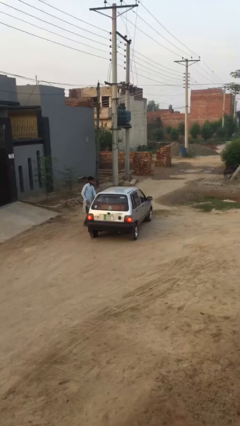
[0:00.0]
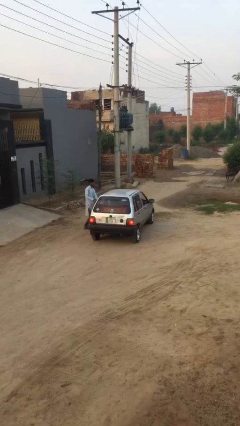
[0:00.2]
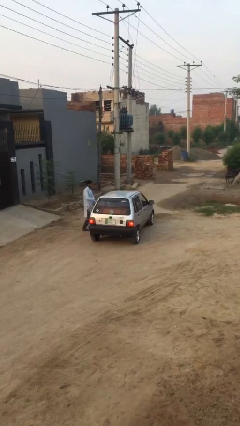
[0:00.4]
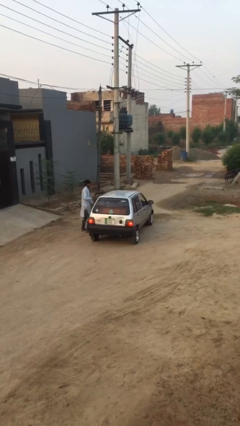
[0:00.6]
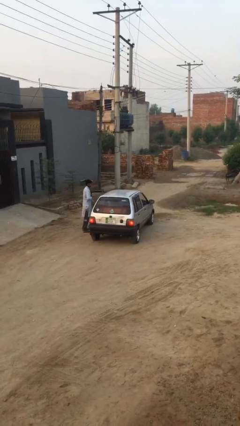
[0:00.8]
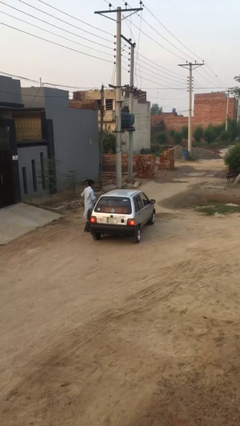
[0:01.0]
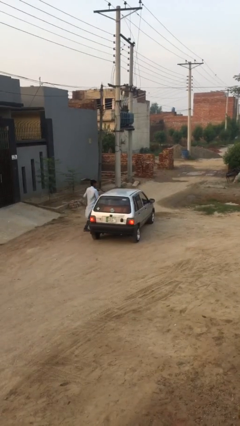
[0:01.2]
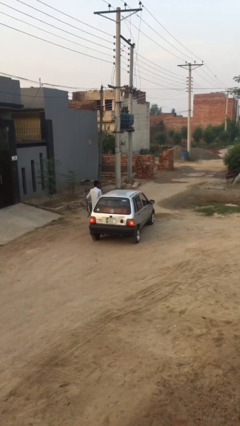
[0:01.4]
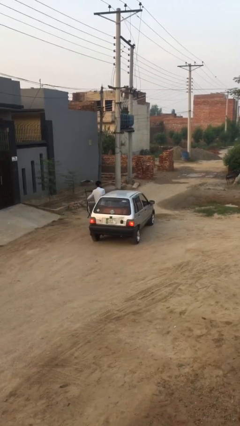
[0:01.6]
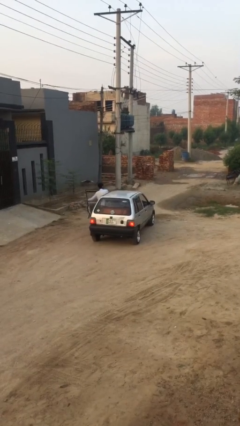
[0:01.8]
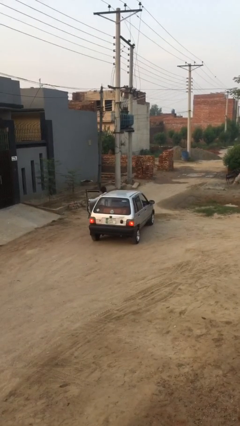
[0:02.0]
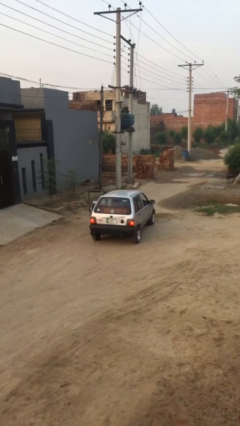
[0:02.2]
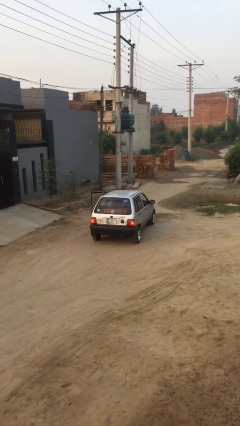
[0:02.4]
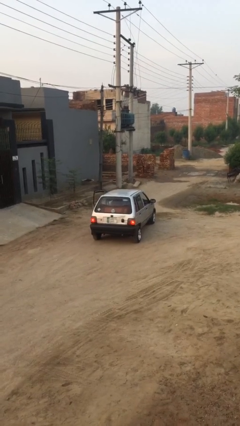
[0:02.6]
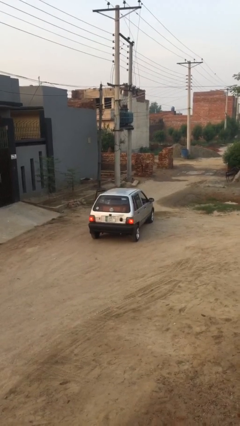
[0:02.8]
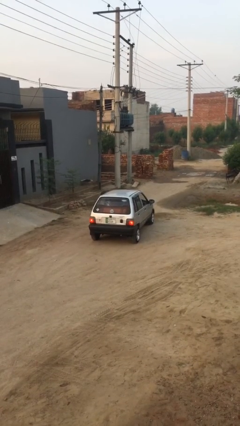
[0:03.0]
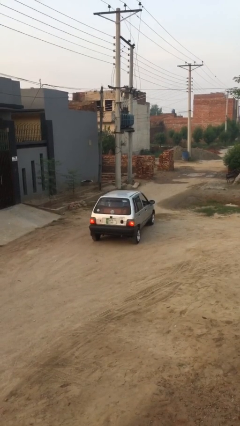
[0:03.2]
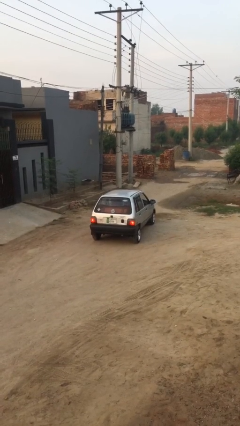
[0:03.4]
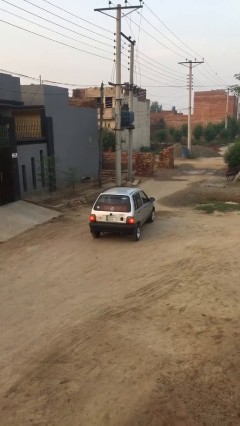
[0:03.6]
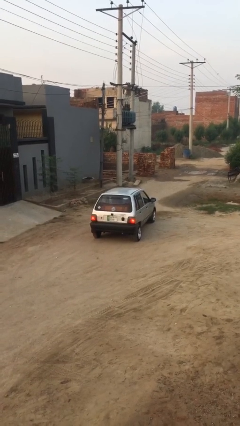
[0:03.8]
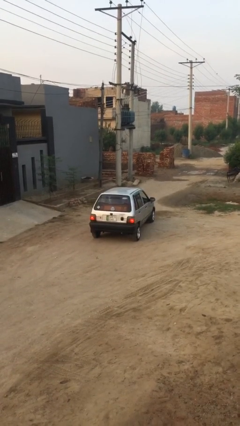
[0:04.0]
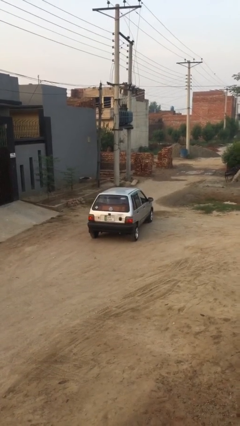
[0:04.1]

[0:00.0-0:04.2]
car picks up person

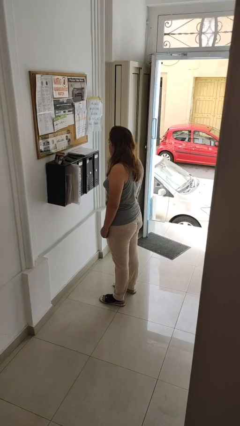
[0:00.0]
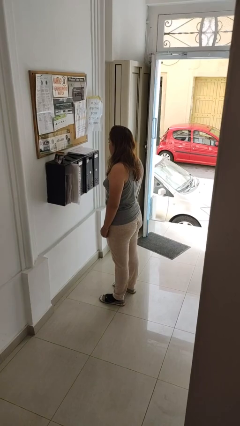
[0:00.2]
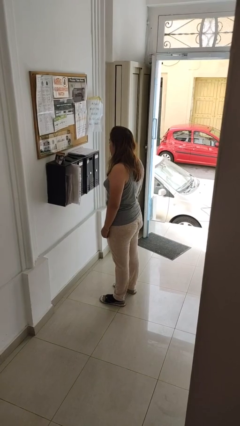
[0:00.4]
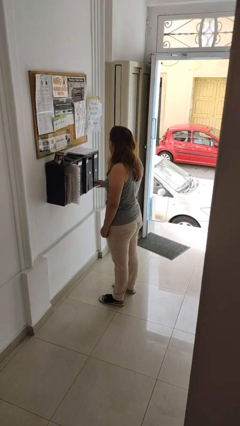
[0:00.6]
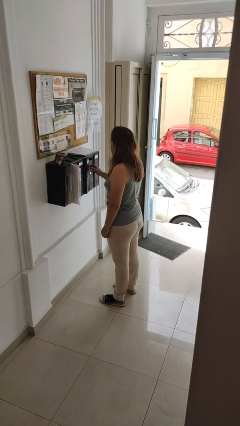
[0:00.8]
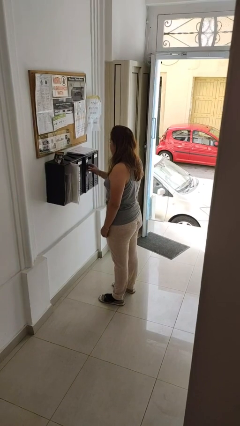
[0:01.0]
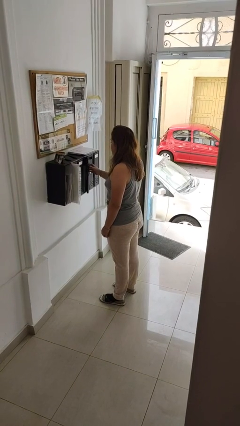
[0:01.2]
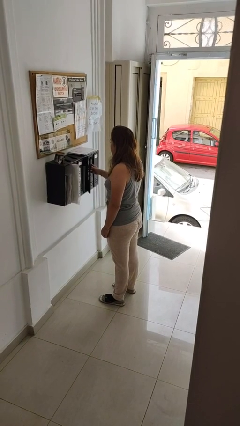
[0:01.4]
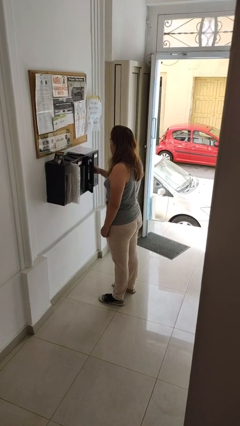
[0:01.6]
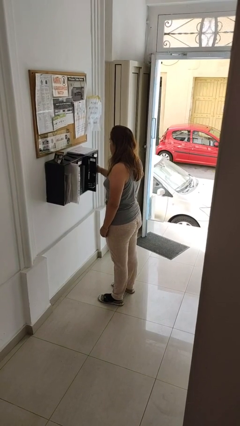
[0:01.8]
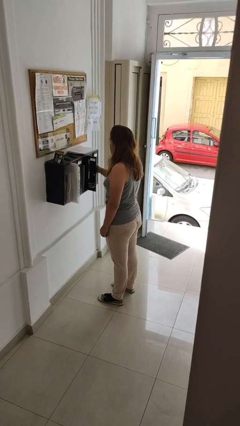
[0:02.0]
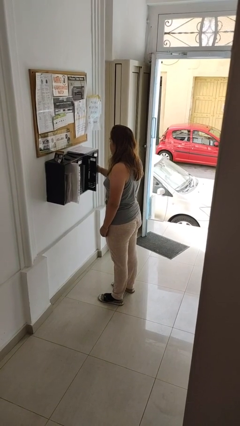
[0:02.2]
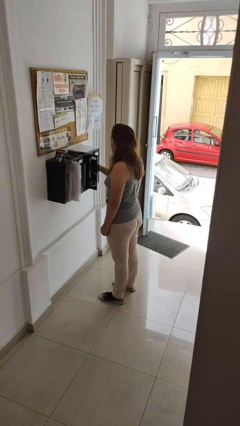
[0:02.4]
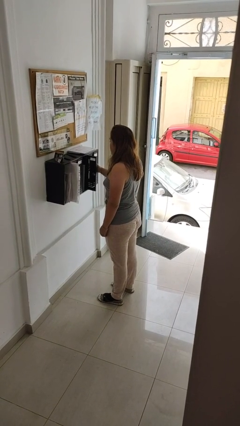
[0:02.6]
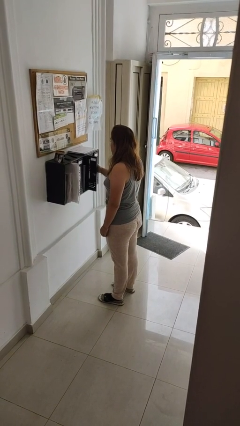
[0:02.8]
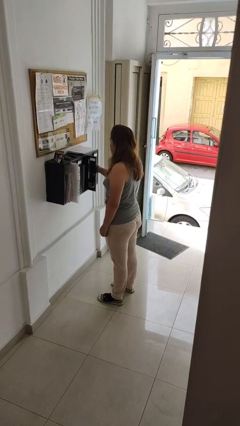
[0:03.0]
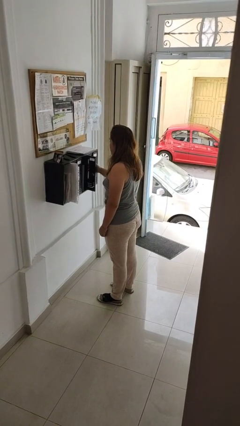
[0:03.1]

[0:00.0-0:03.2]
person opens mailbox

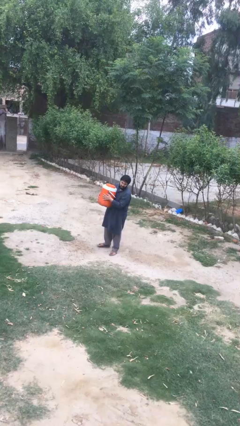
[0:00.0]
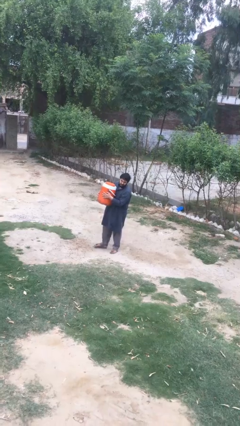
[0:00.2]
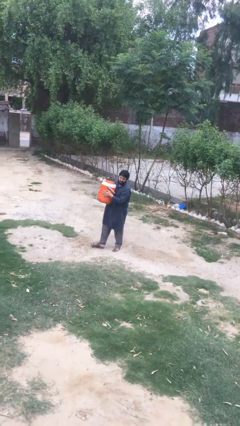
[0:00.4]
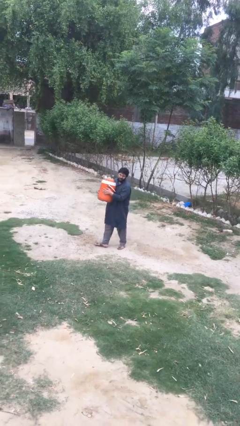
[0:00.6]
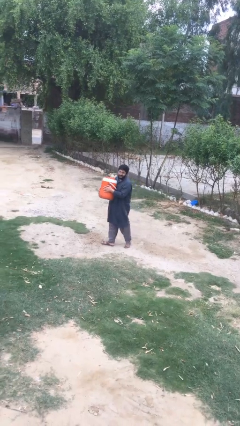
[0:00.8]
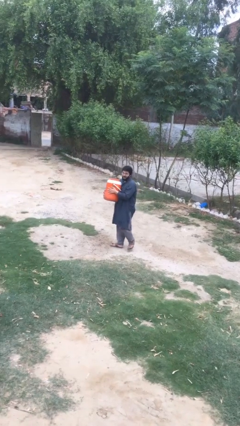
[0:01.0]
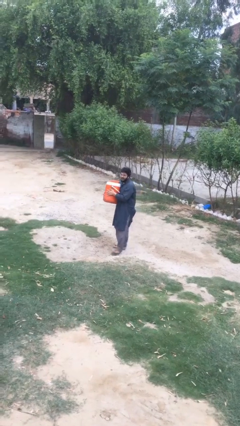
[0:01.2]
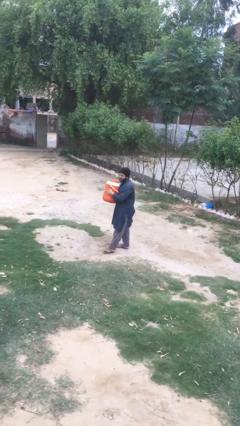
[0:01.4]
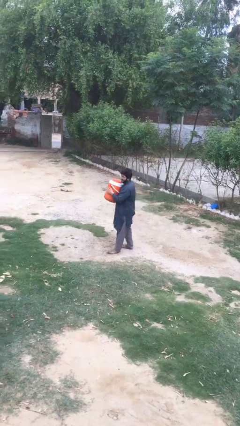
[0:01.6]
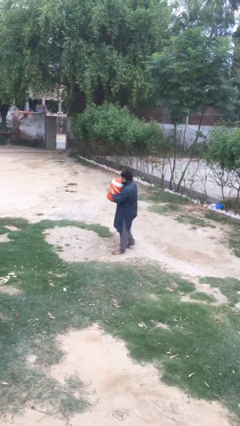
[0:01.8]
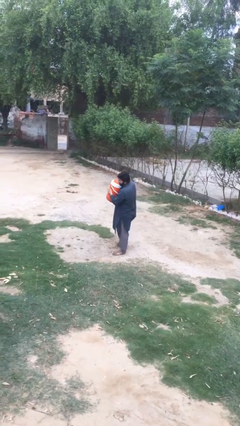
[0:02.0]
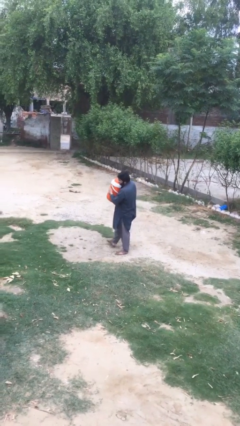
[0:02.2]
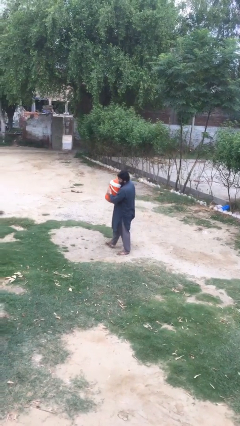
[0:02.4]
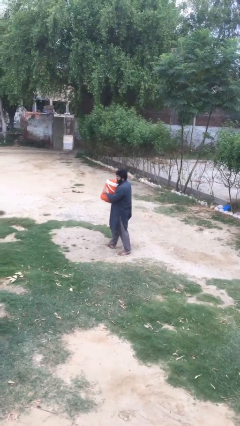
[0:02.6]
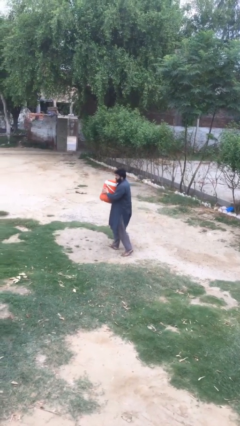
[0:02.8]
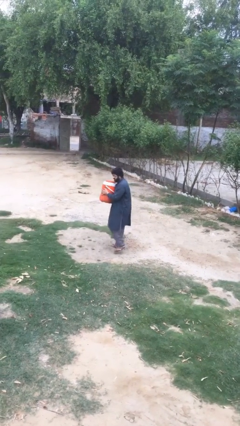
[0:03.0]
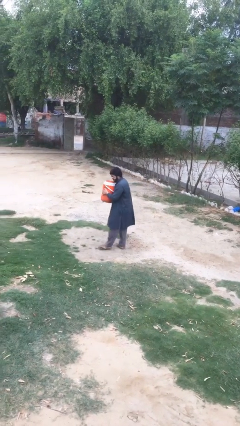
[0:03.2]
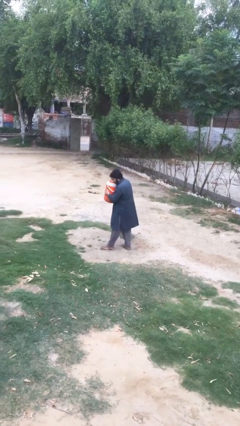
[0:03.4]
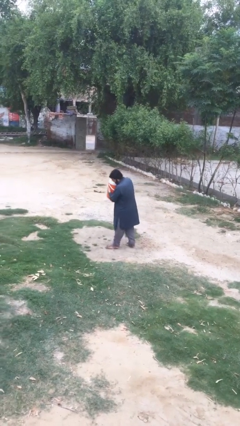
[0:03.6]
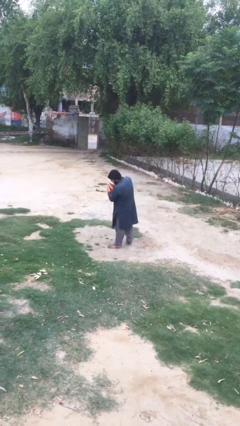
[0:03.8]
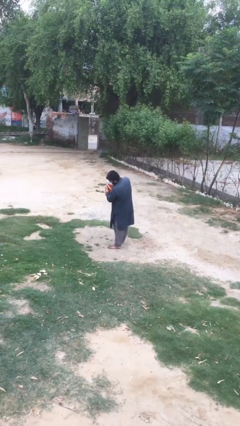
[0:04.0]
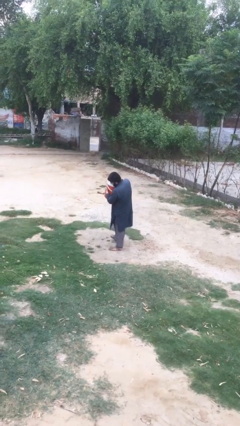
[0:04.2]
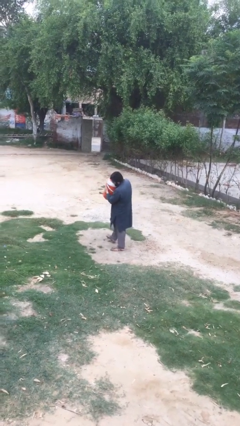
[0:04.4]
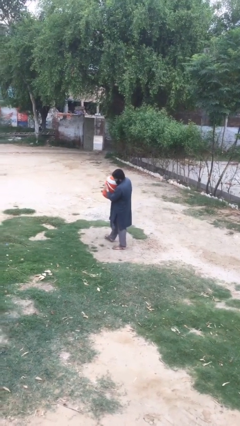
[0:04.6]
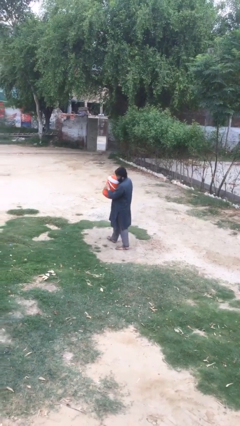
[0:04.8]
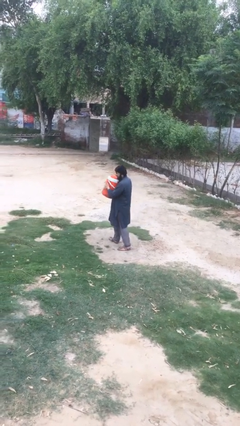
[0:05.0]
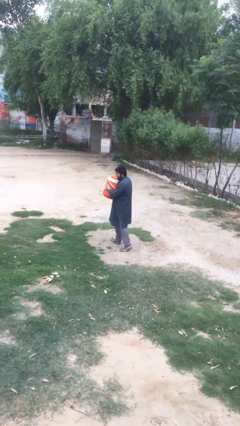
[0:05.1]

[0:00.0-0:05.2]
person carries heavy object

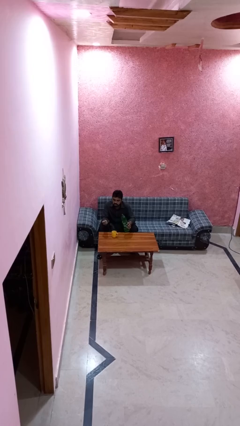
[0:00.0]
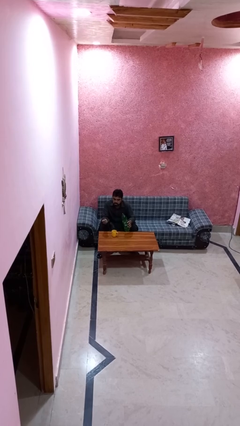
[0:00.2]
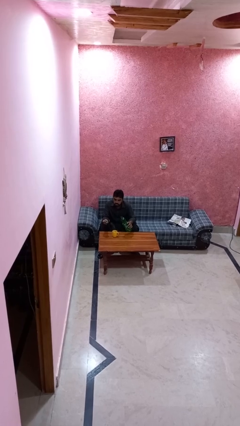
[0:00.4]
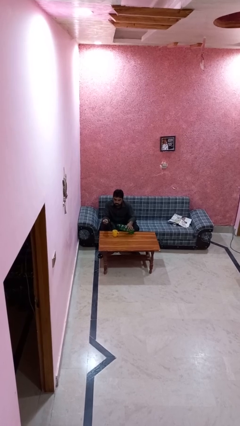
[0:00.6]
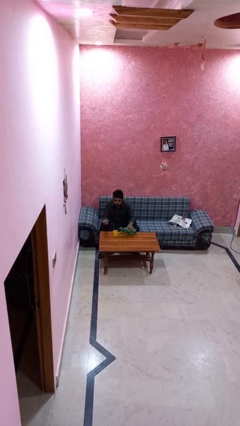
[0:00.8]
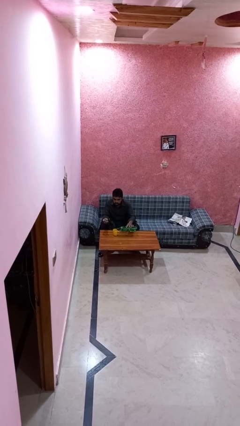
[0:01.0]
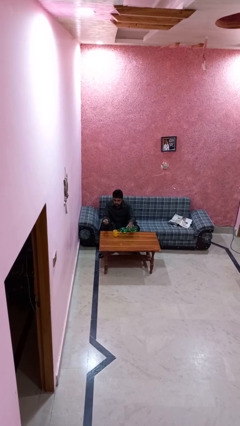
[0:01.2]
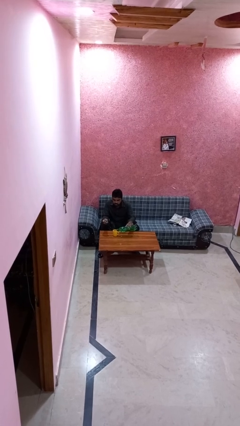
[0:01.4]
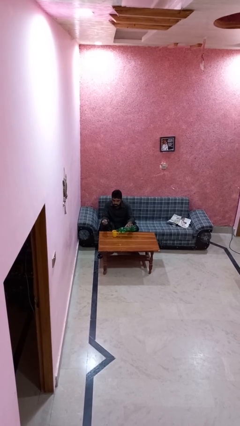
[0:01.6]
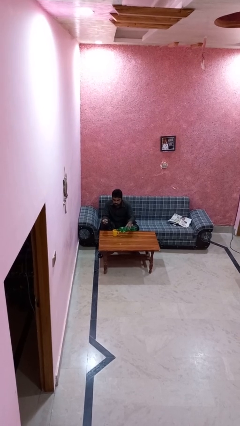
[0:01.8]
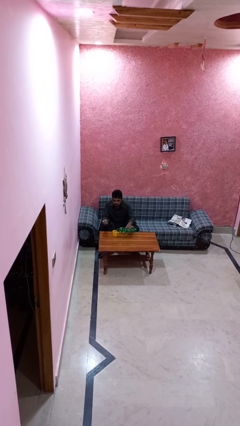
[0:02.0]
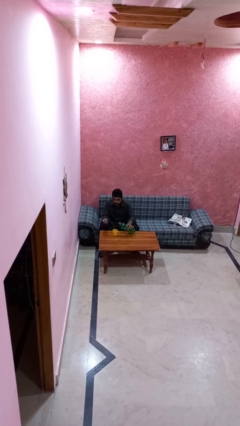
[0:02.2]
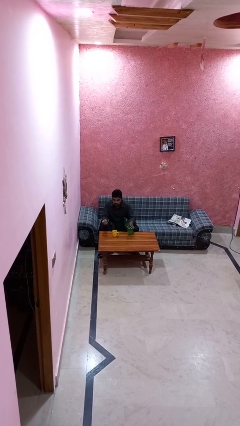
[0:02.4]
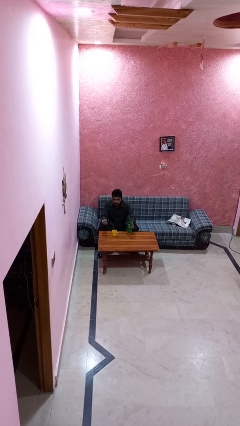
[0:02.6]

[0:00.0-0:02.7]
person pours liquid into cup

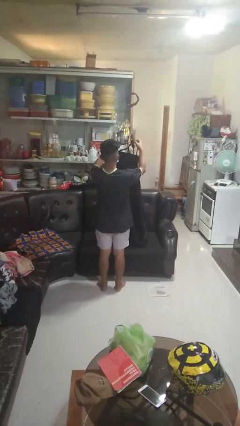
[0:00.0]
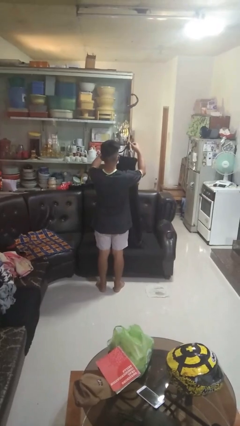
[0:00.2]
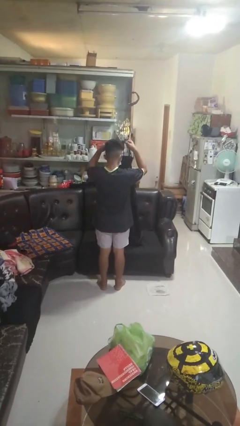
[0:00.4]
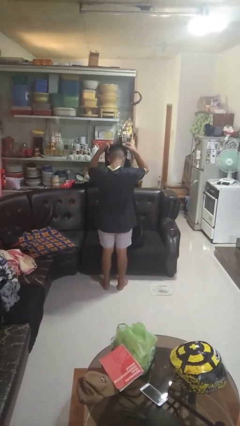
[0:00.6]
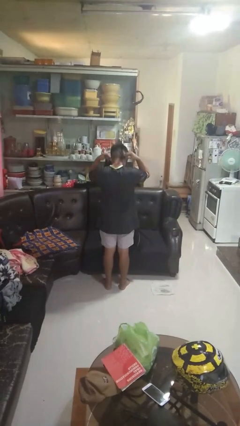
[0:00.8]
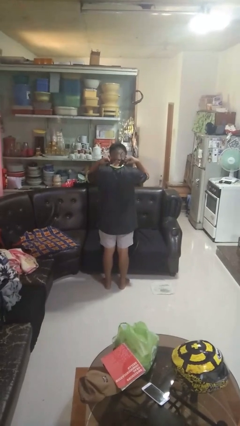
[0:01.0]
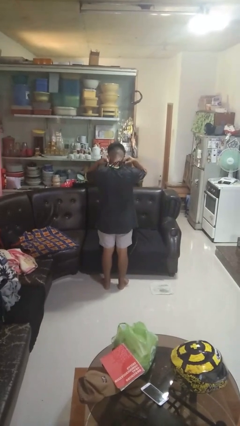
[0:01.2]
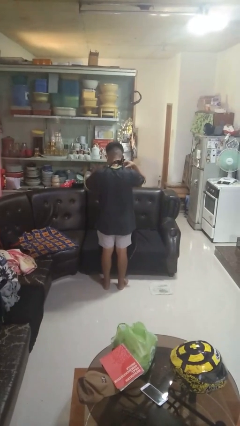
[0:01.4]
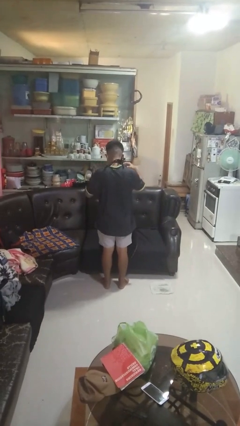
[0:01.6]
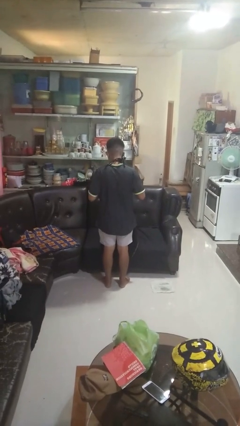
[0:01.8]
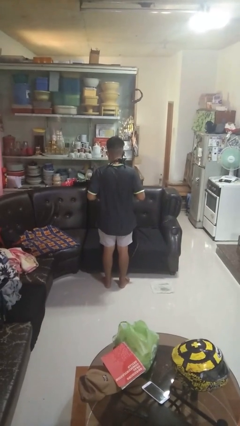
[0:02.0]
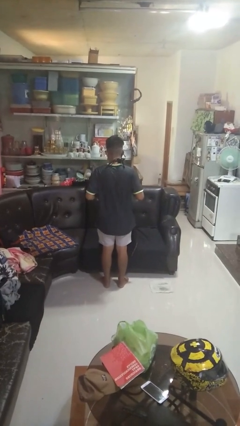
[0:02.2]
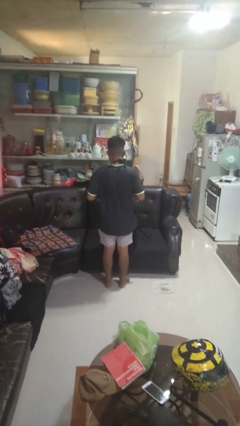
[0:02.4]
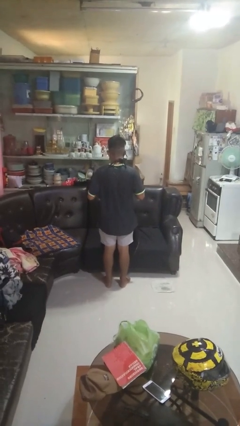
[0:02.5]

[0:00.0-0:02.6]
person puts on apron
